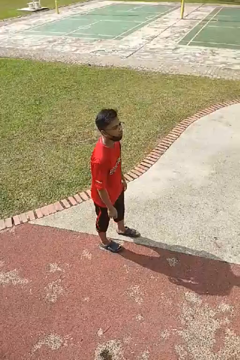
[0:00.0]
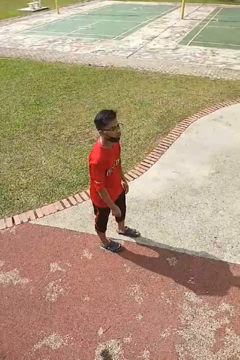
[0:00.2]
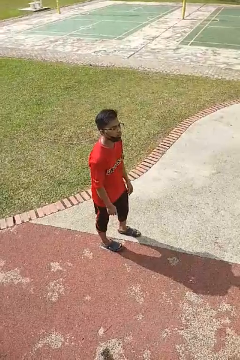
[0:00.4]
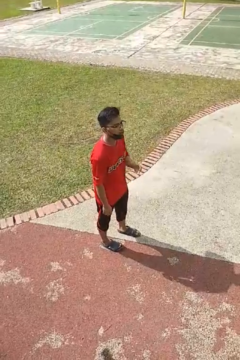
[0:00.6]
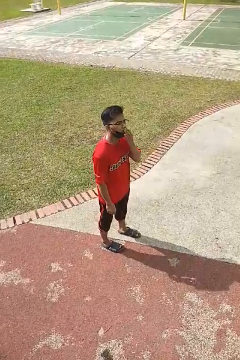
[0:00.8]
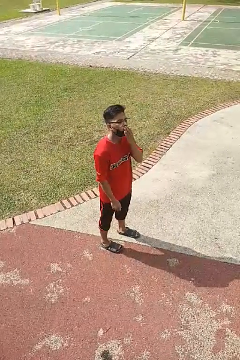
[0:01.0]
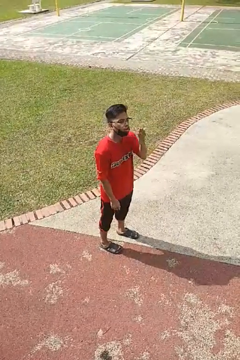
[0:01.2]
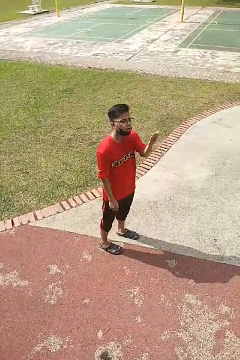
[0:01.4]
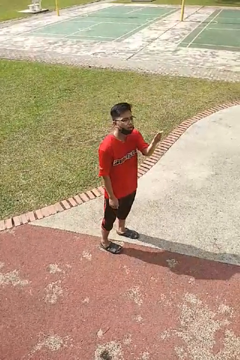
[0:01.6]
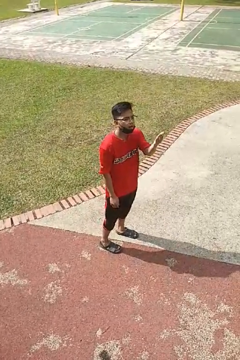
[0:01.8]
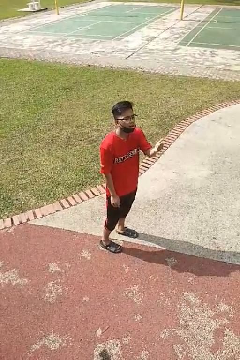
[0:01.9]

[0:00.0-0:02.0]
person gestures blow kiss

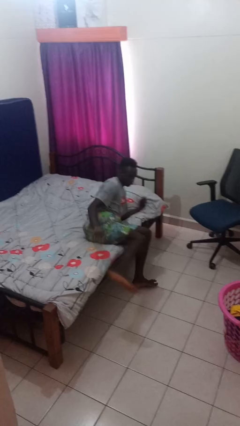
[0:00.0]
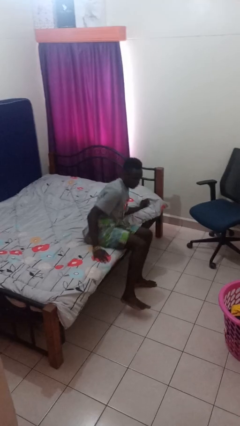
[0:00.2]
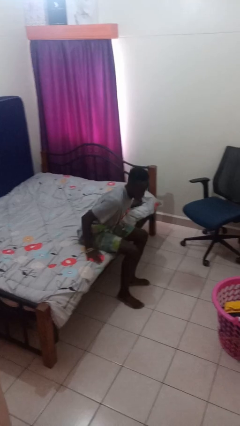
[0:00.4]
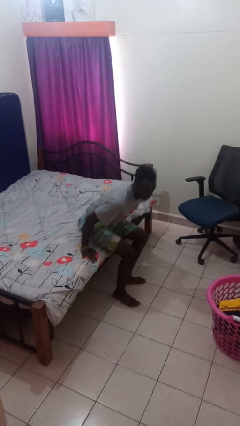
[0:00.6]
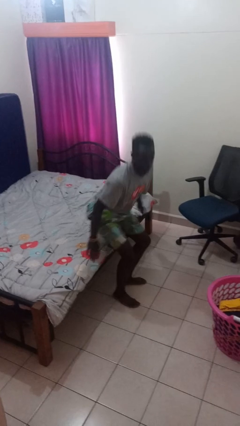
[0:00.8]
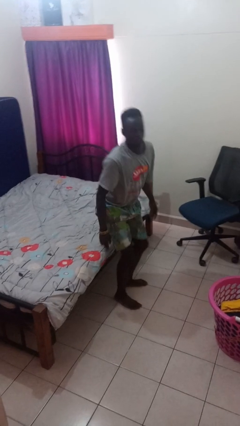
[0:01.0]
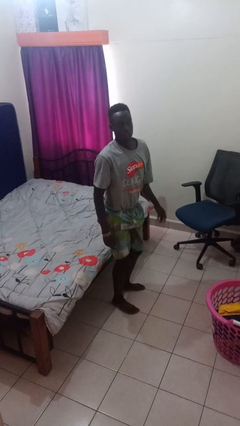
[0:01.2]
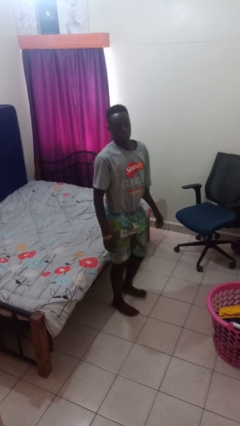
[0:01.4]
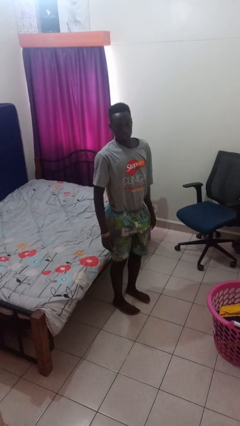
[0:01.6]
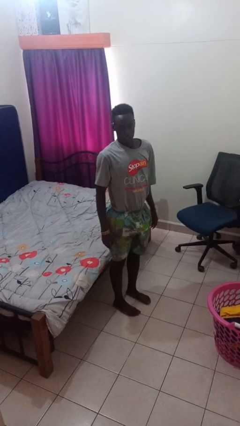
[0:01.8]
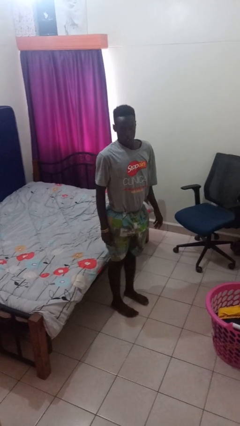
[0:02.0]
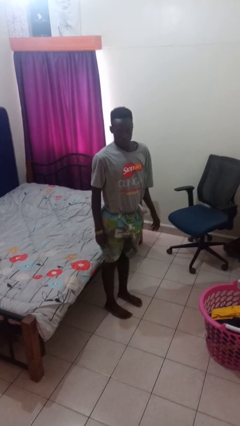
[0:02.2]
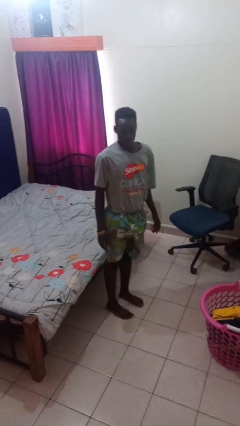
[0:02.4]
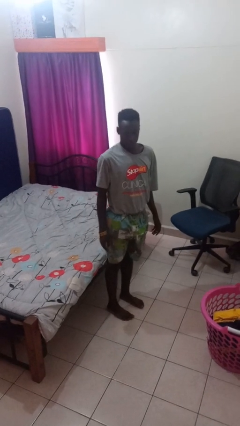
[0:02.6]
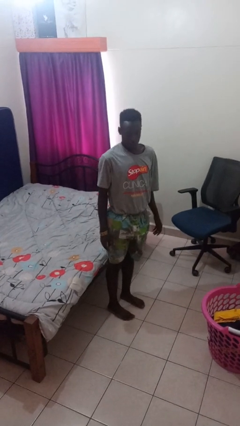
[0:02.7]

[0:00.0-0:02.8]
person stands up

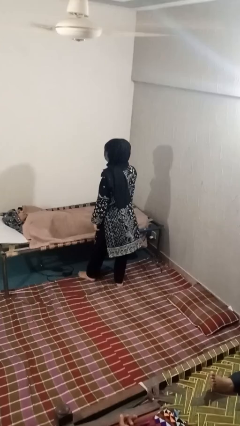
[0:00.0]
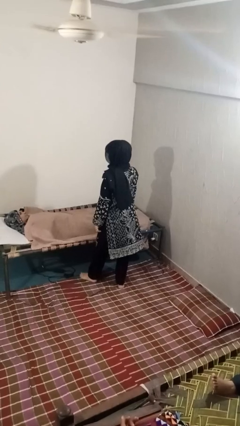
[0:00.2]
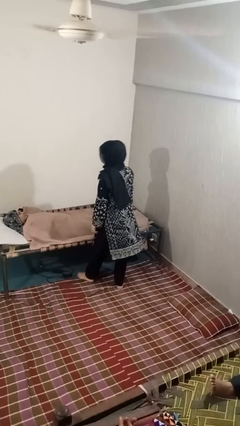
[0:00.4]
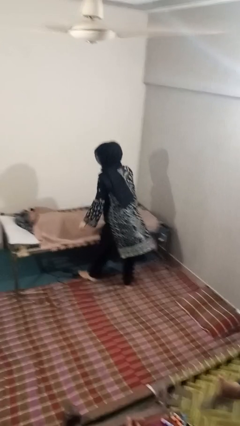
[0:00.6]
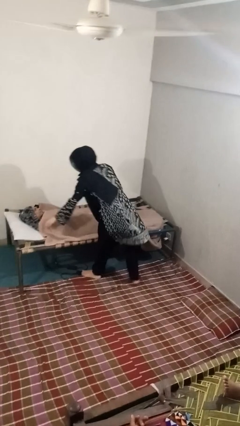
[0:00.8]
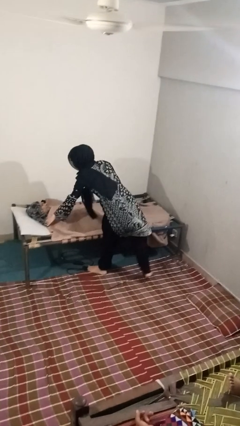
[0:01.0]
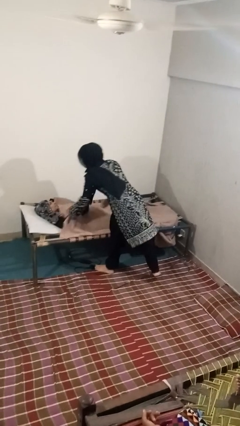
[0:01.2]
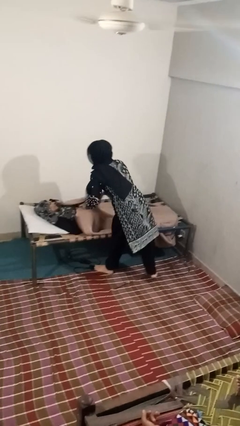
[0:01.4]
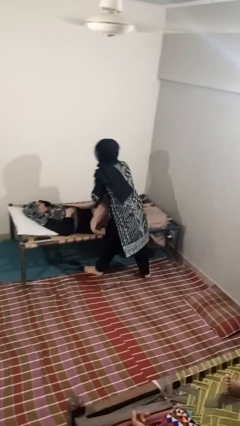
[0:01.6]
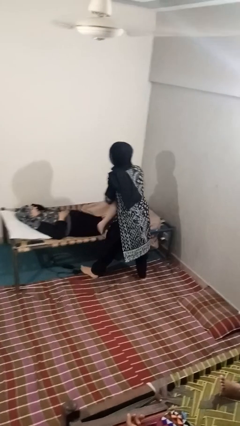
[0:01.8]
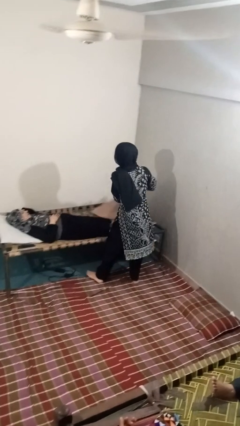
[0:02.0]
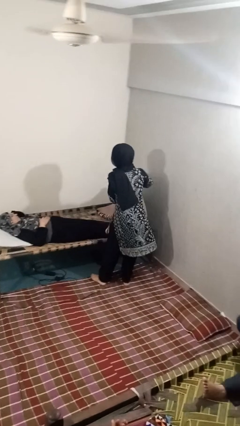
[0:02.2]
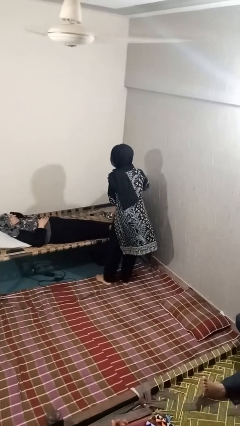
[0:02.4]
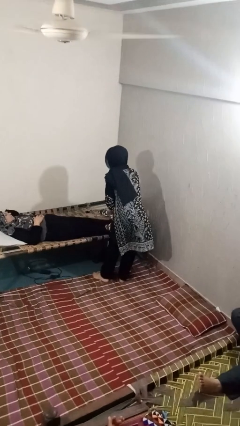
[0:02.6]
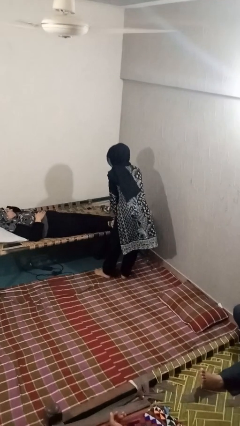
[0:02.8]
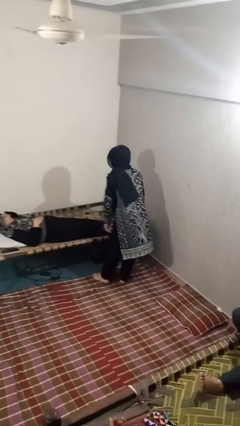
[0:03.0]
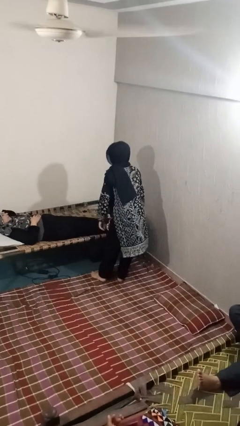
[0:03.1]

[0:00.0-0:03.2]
person uncovers friend with blanket

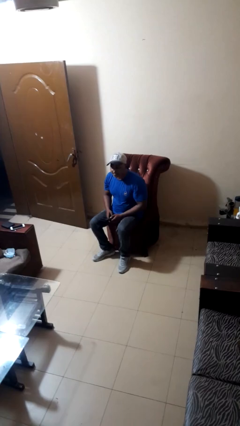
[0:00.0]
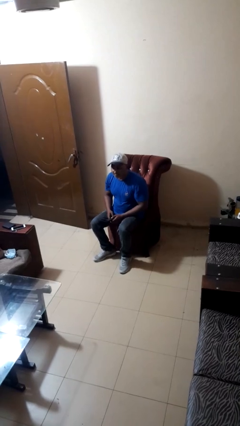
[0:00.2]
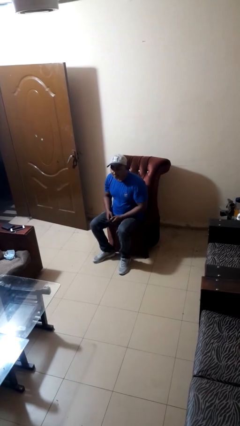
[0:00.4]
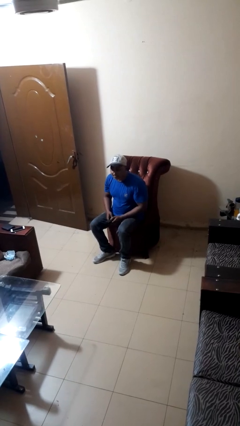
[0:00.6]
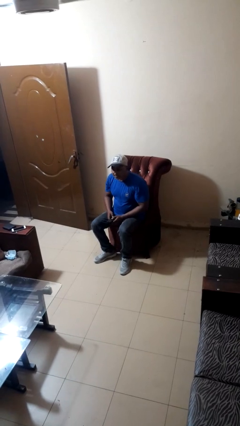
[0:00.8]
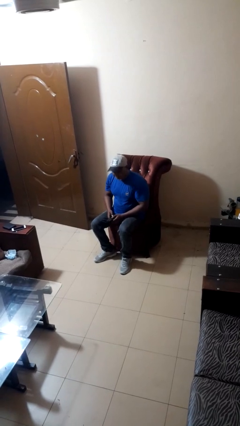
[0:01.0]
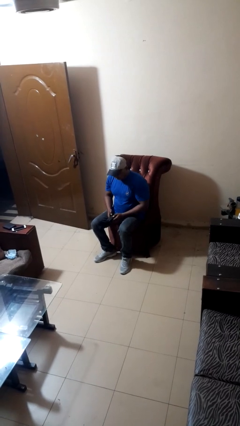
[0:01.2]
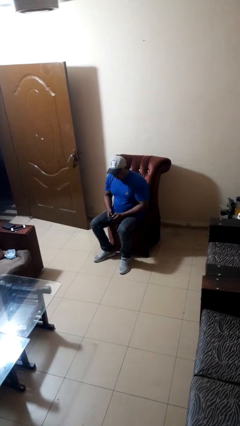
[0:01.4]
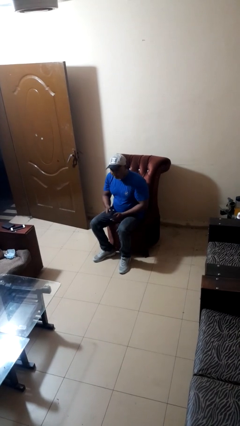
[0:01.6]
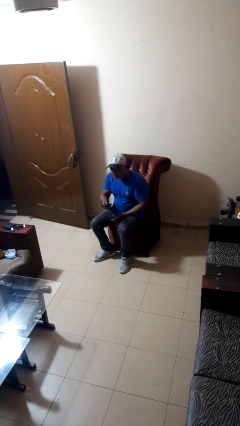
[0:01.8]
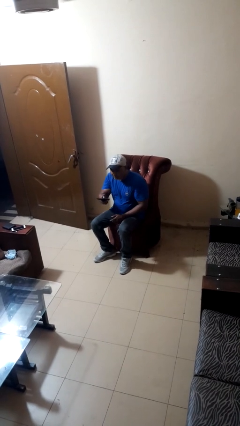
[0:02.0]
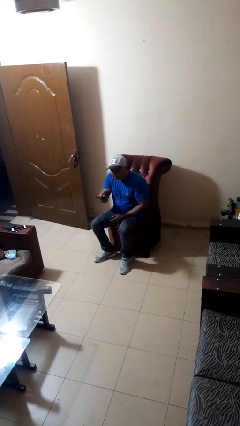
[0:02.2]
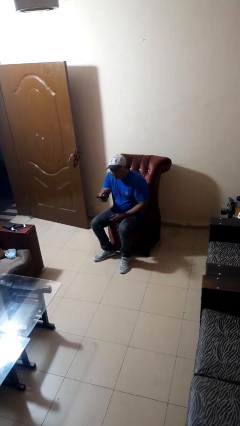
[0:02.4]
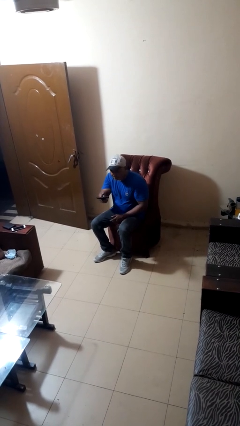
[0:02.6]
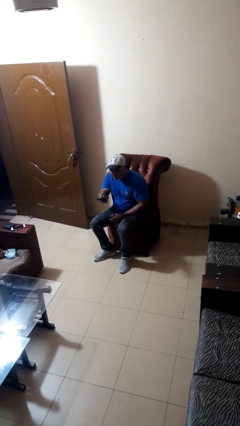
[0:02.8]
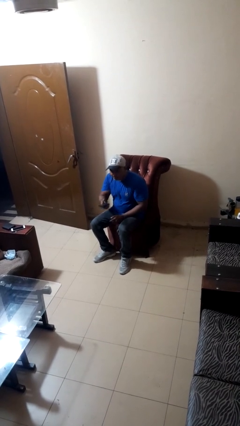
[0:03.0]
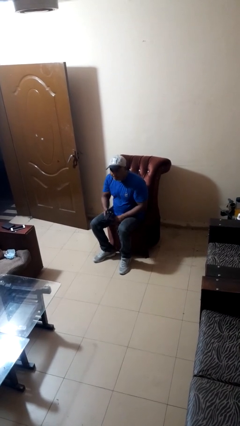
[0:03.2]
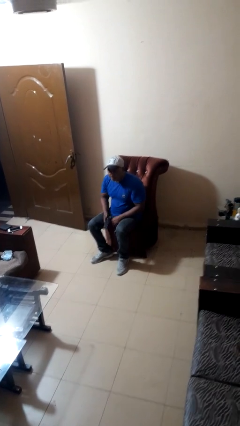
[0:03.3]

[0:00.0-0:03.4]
person uses television remote

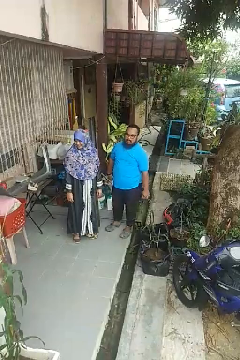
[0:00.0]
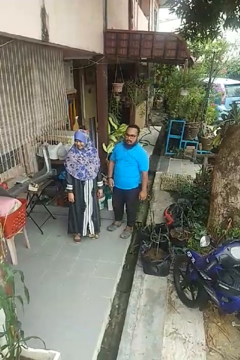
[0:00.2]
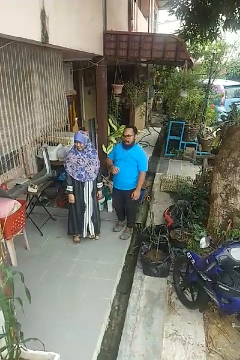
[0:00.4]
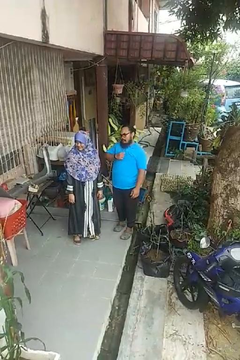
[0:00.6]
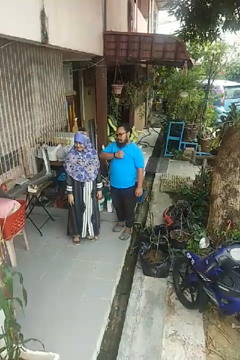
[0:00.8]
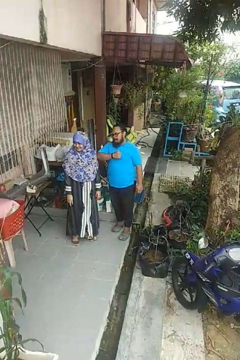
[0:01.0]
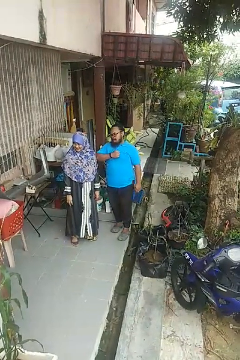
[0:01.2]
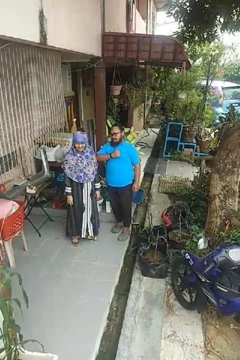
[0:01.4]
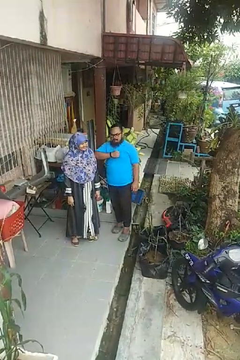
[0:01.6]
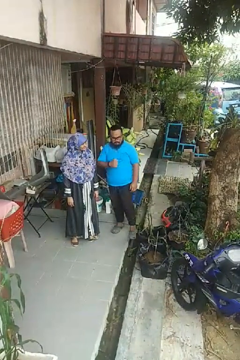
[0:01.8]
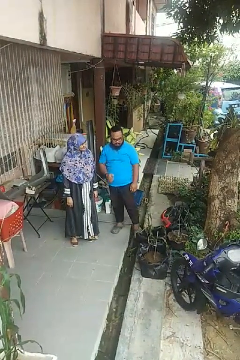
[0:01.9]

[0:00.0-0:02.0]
person nudges person with elbow

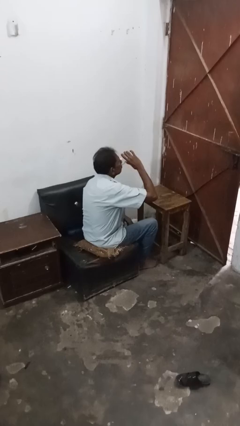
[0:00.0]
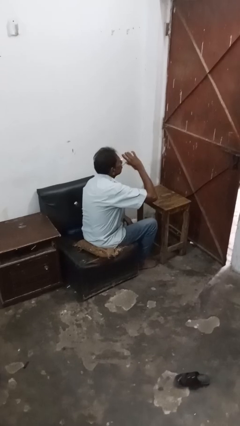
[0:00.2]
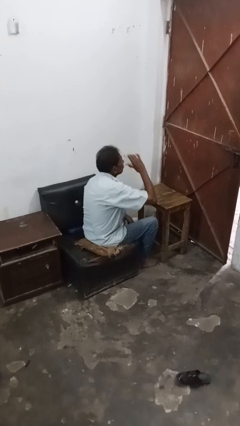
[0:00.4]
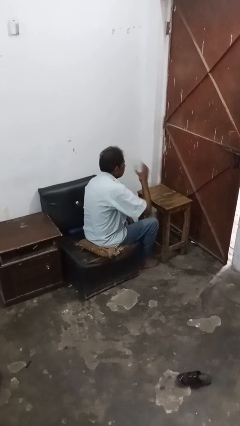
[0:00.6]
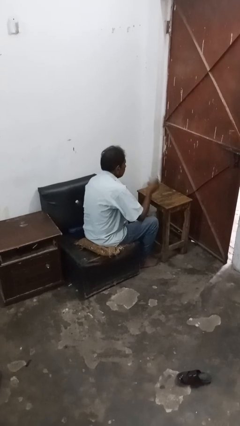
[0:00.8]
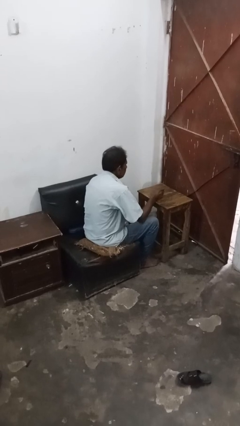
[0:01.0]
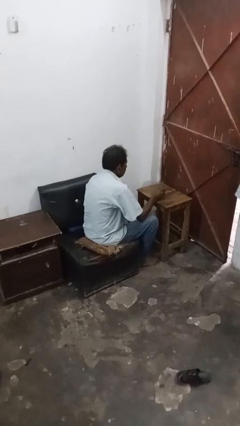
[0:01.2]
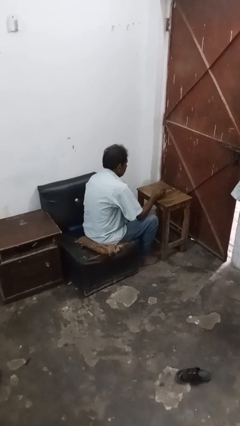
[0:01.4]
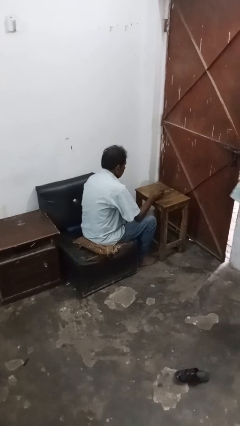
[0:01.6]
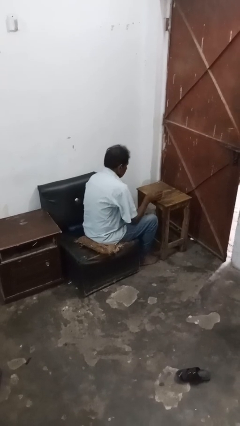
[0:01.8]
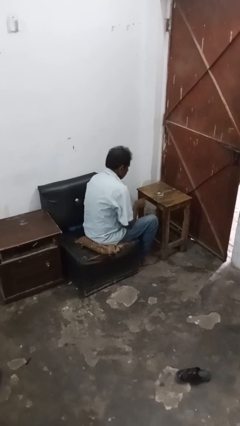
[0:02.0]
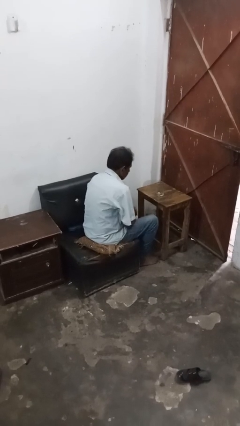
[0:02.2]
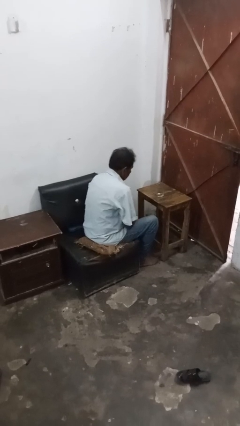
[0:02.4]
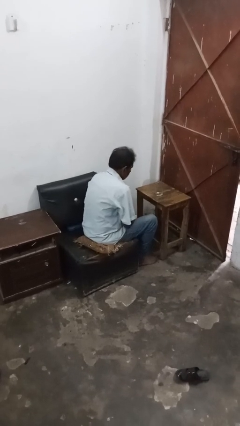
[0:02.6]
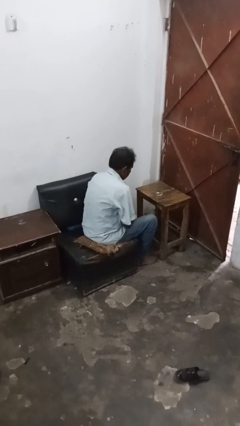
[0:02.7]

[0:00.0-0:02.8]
person puts down object on table

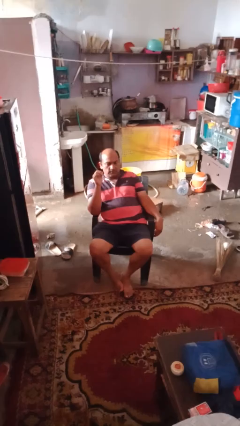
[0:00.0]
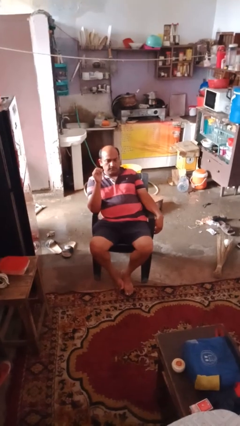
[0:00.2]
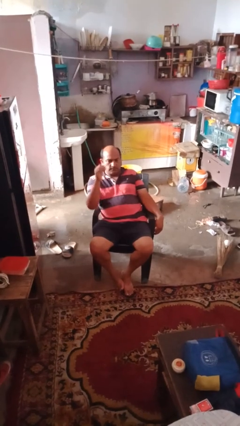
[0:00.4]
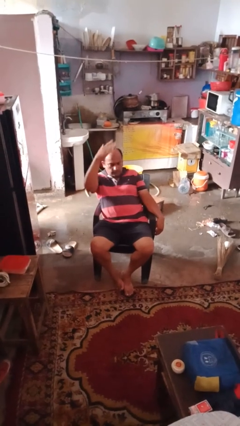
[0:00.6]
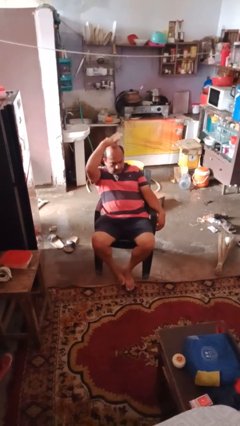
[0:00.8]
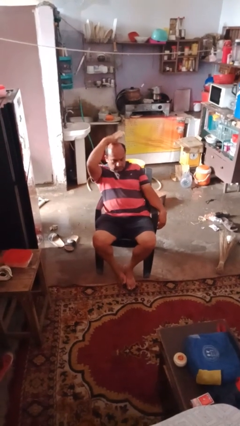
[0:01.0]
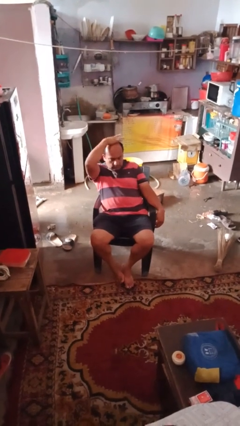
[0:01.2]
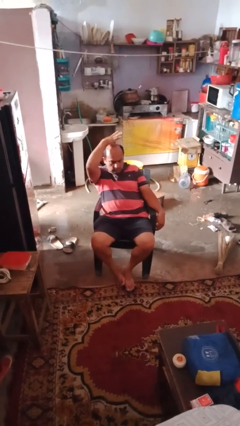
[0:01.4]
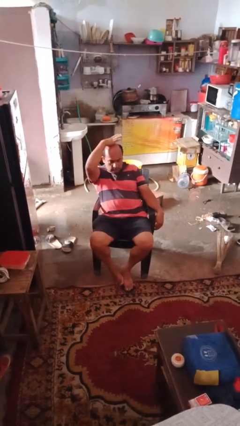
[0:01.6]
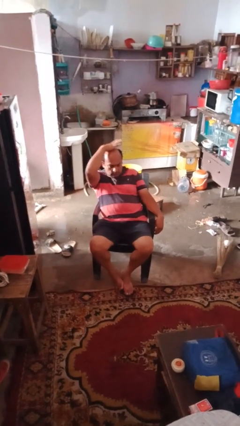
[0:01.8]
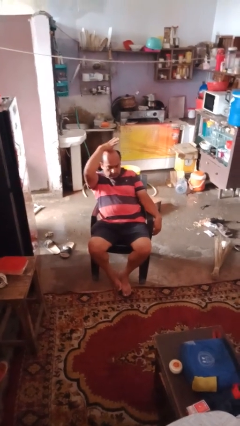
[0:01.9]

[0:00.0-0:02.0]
person pats head
